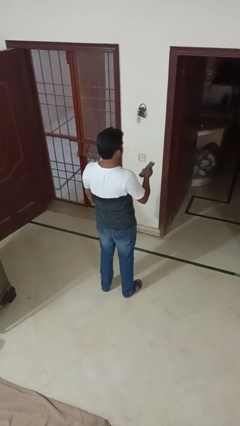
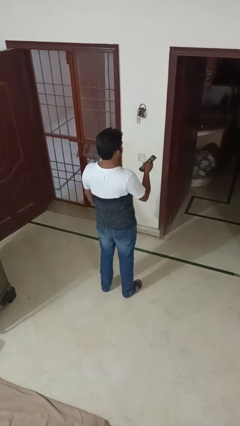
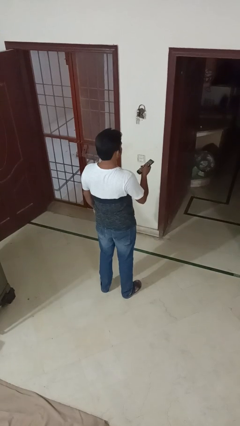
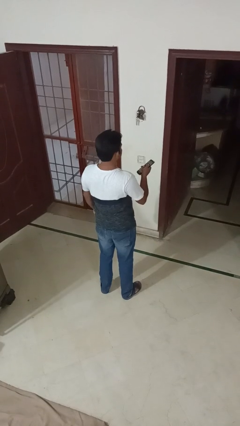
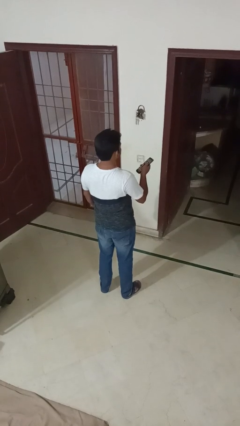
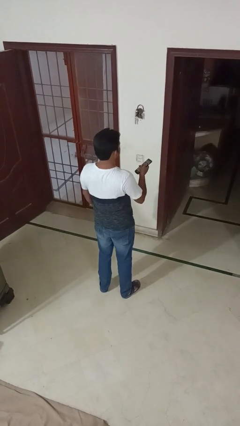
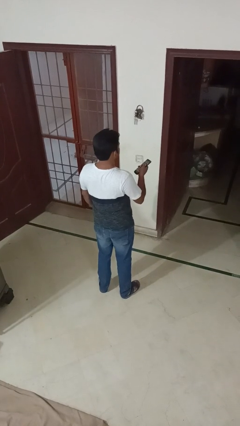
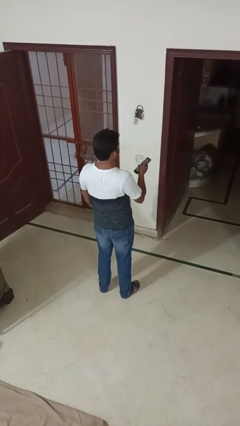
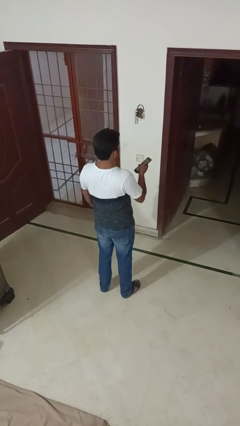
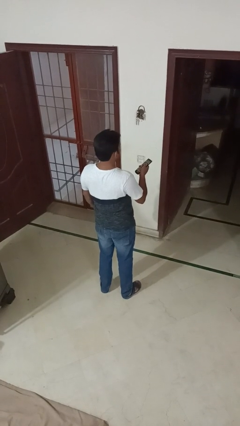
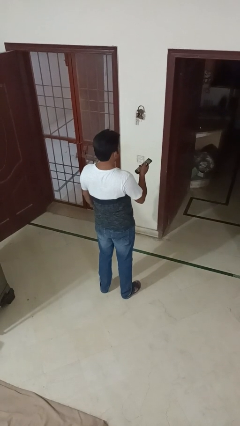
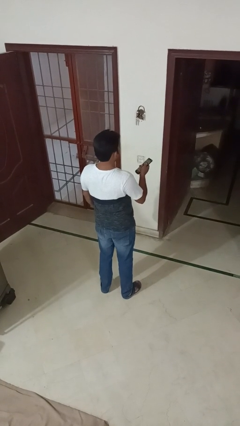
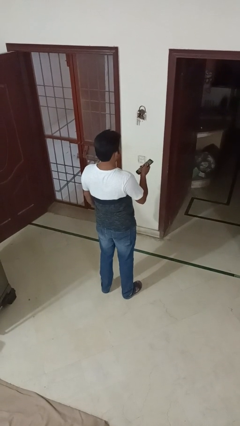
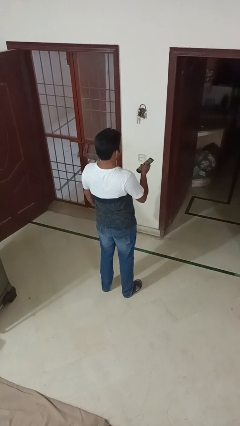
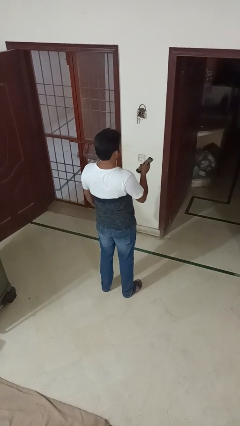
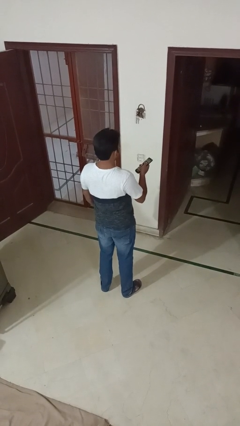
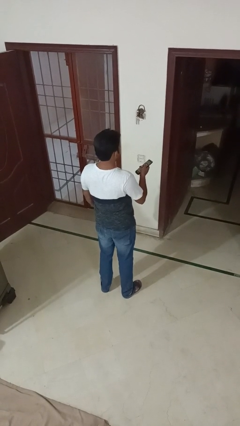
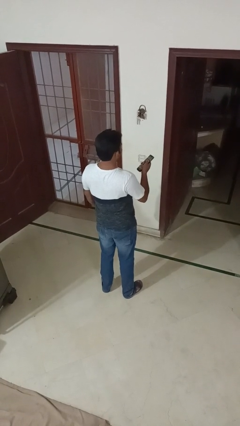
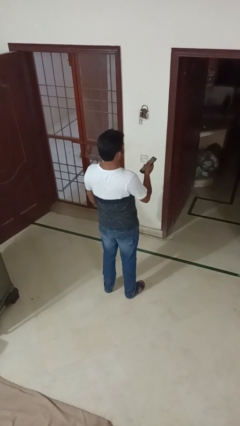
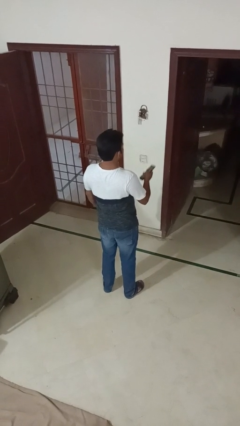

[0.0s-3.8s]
person uses television remote

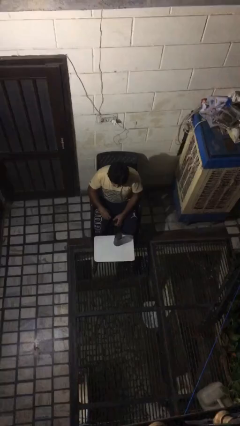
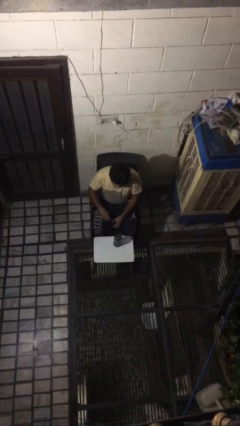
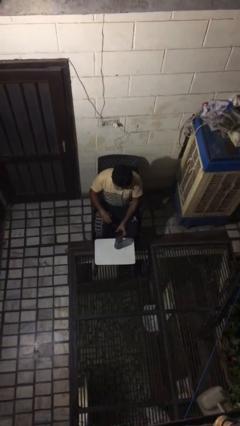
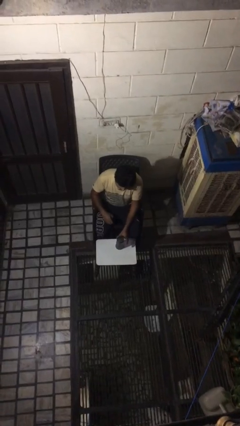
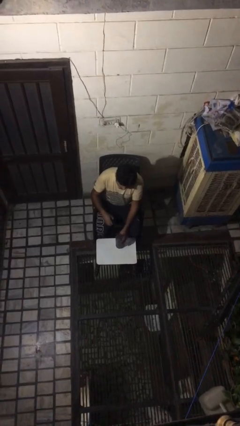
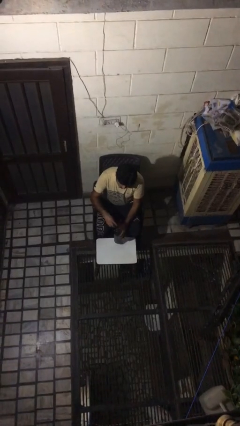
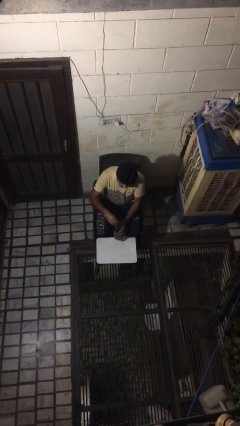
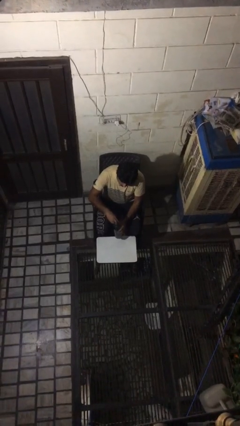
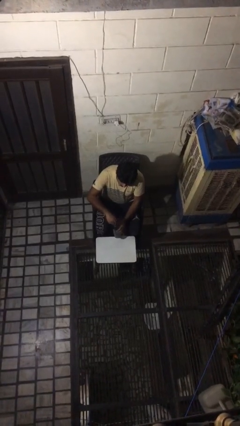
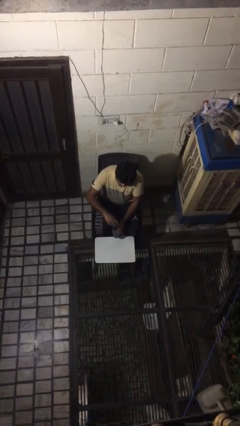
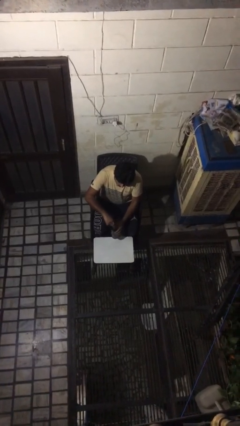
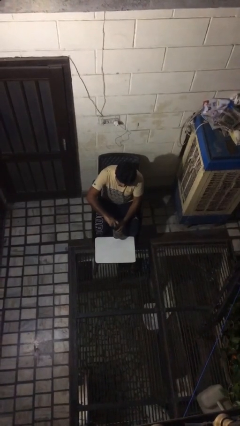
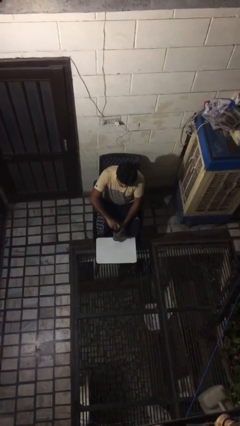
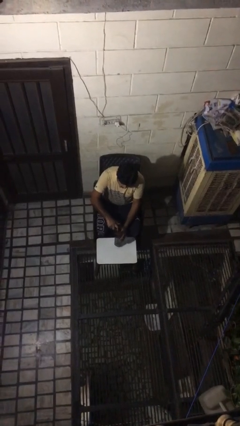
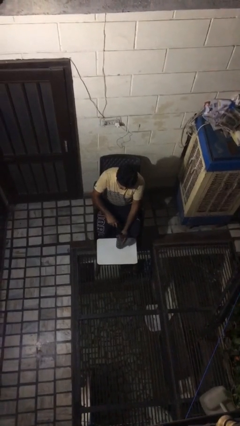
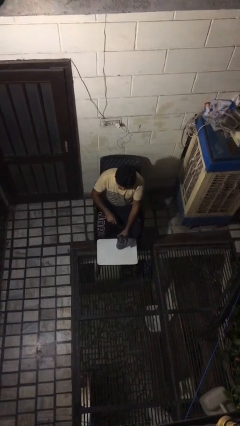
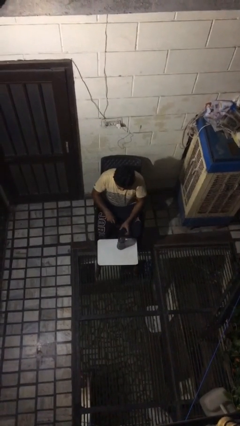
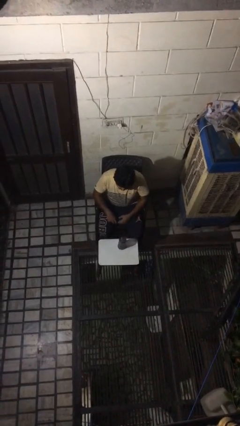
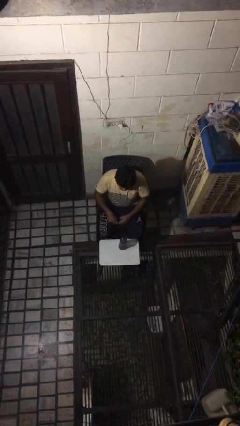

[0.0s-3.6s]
person screws lid to bottle

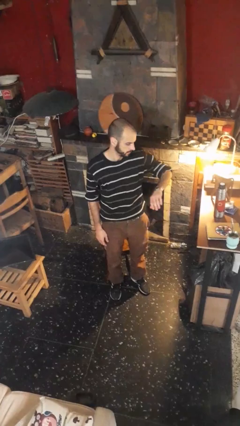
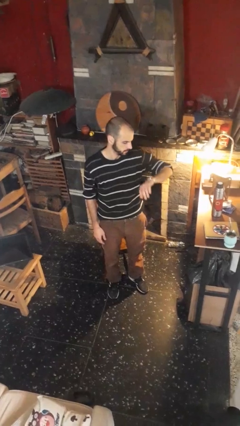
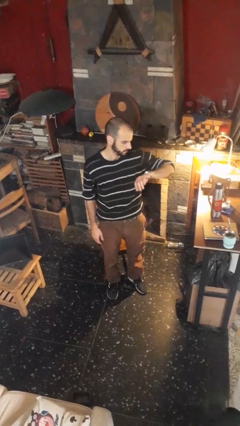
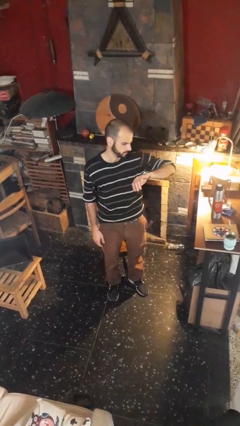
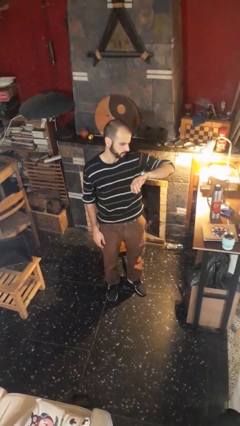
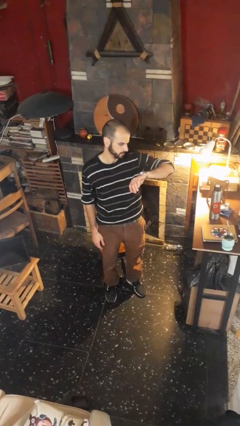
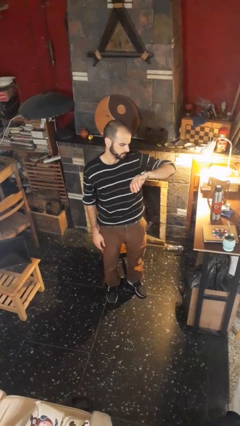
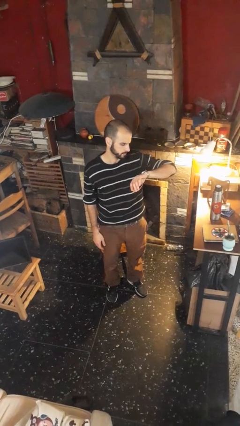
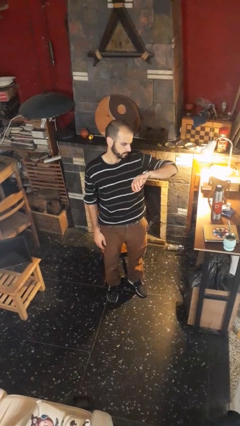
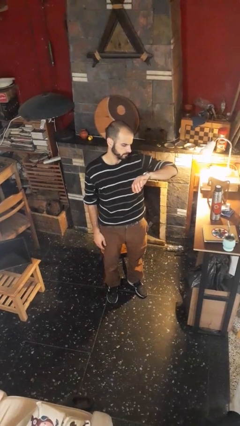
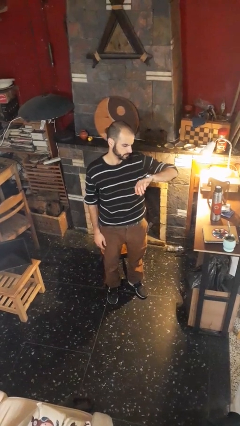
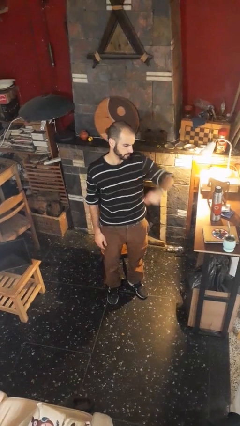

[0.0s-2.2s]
person looks at wristwatch

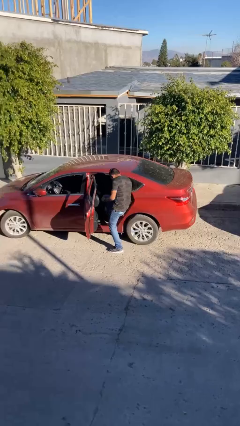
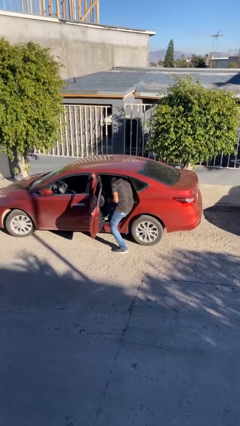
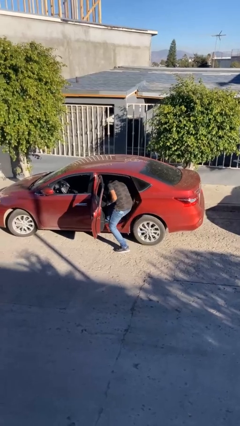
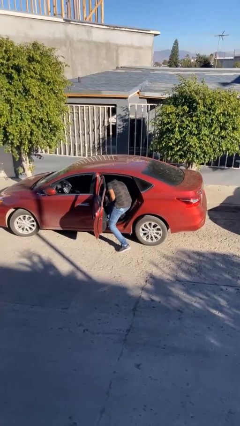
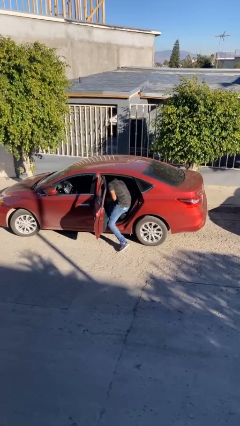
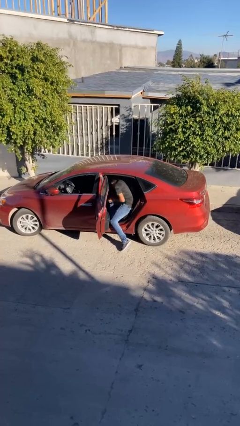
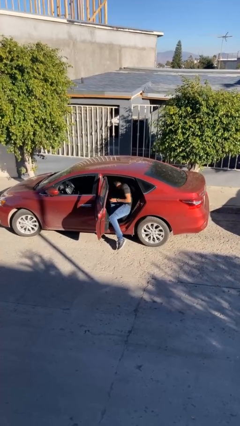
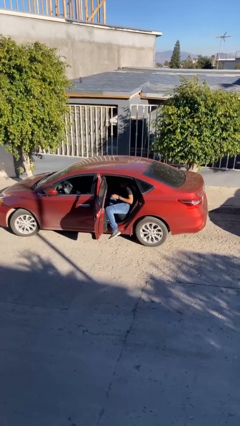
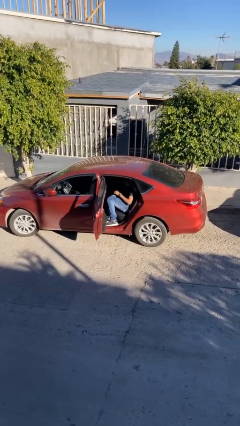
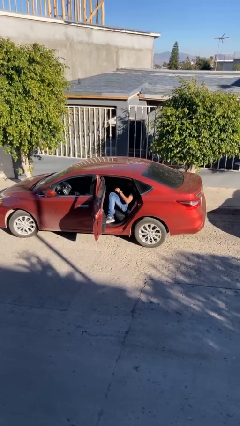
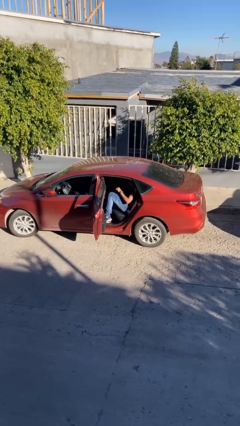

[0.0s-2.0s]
person enters car

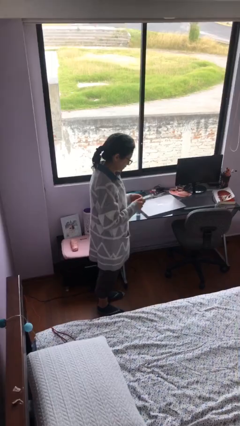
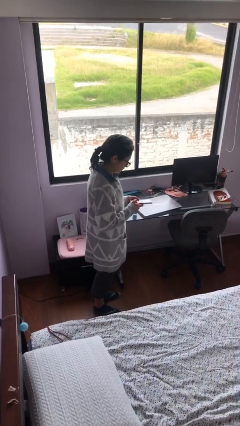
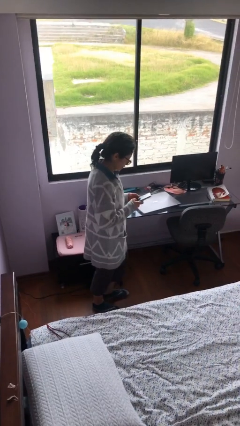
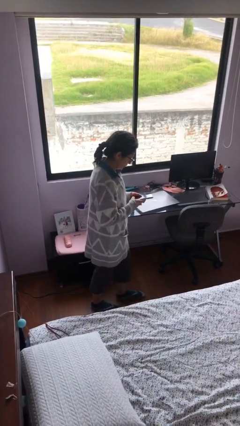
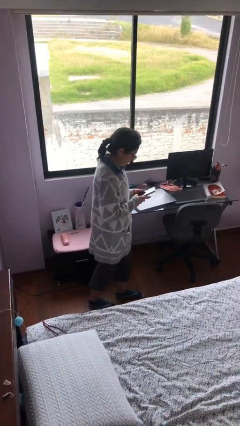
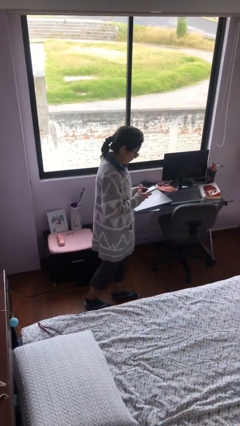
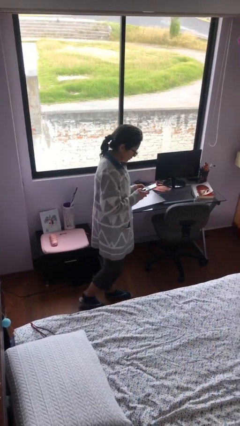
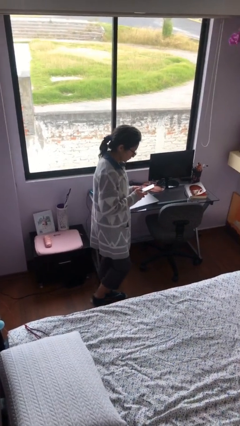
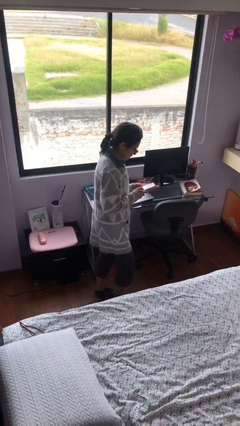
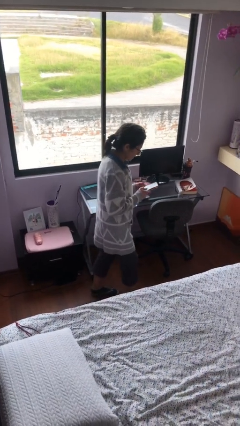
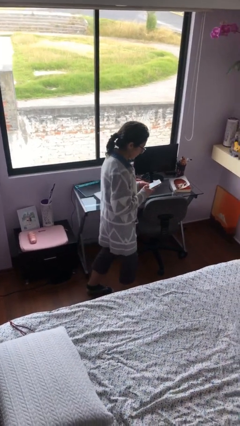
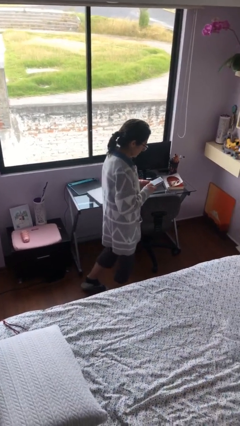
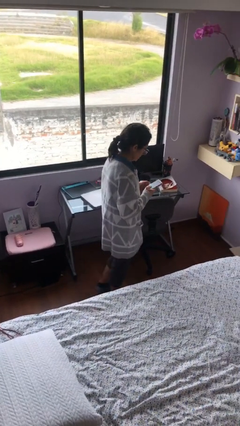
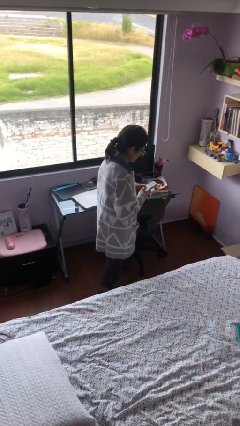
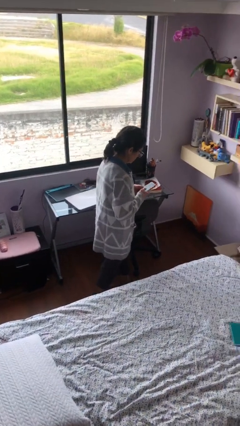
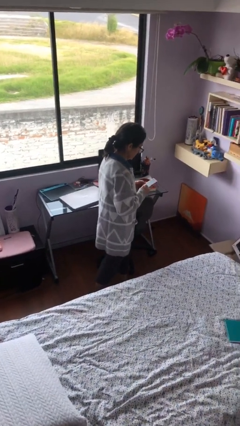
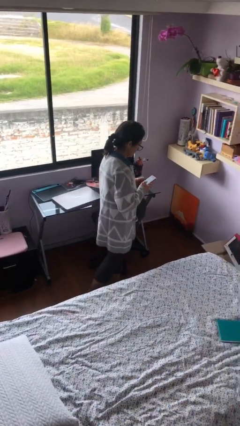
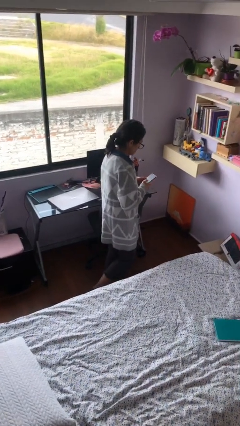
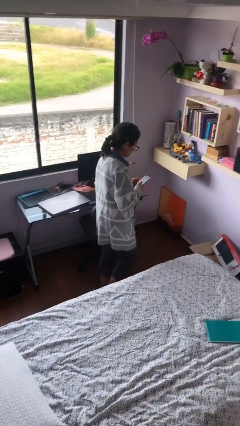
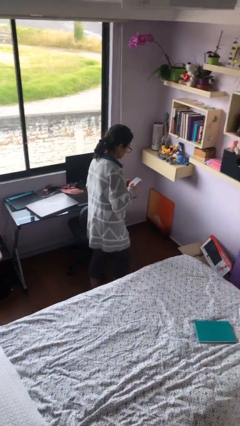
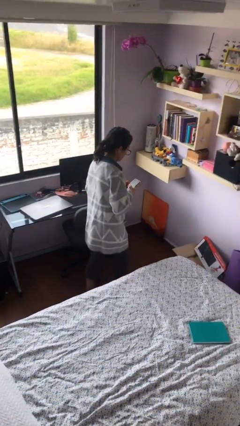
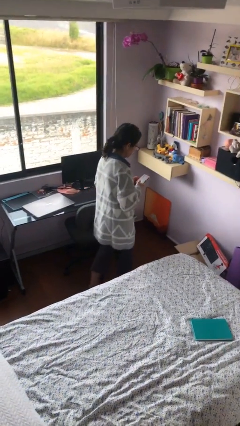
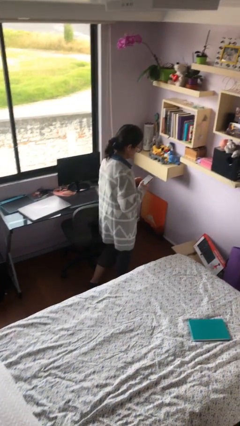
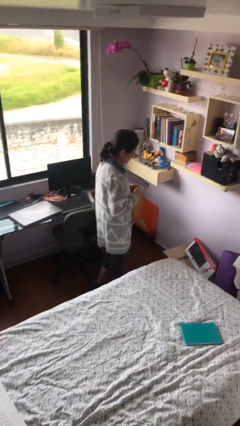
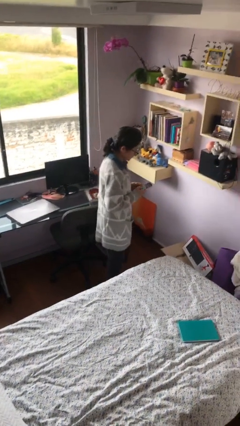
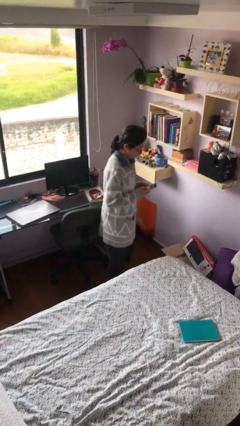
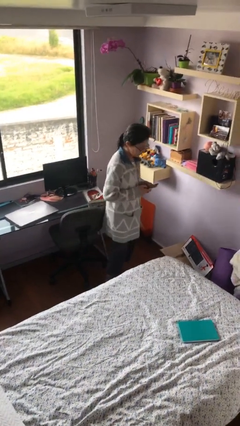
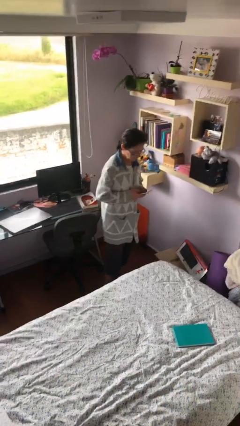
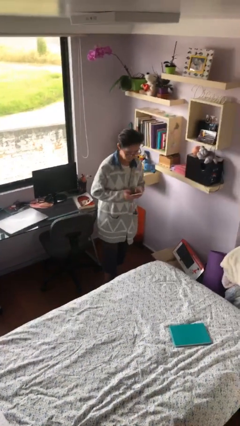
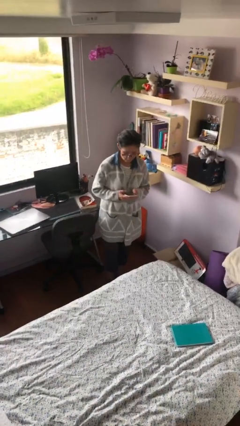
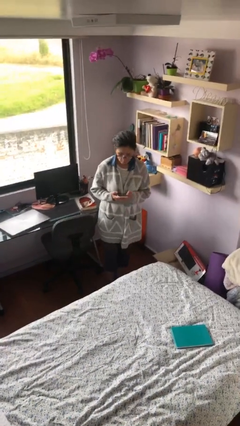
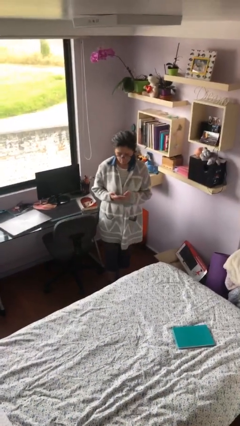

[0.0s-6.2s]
person texts on phone
